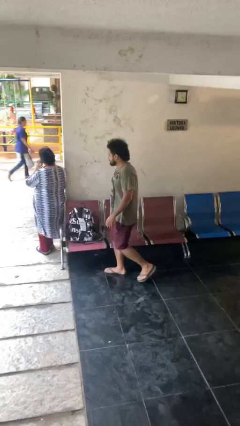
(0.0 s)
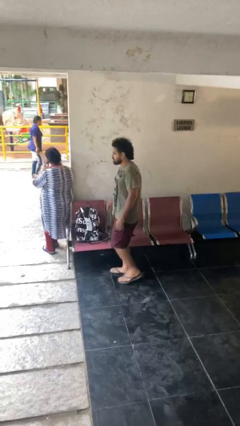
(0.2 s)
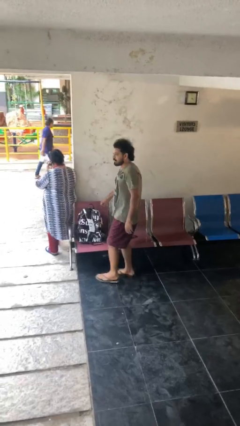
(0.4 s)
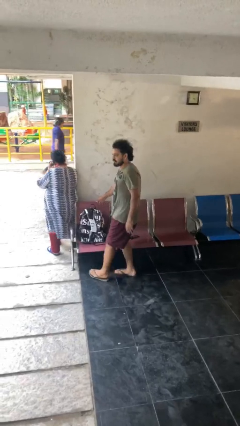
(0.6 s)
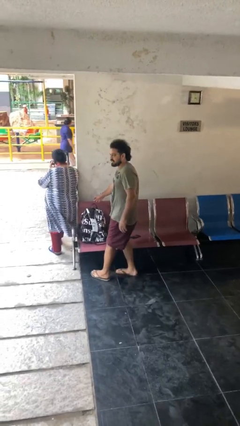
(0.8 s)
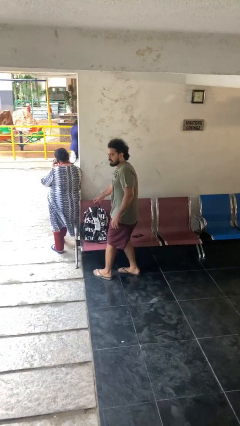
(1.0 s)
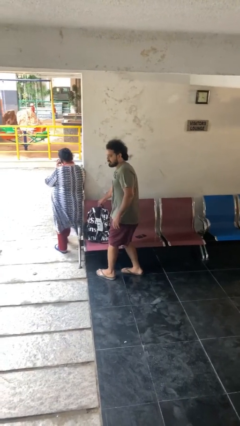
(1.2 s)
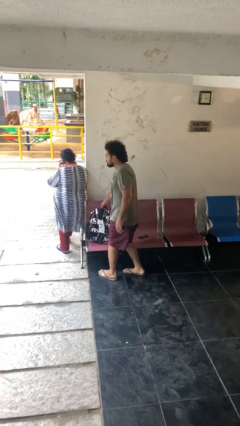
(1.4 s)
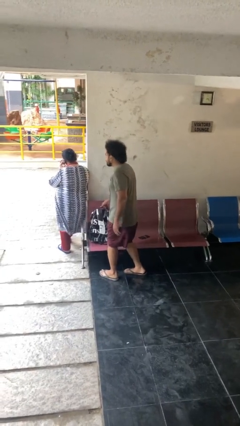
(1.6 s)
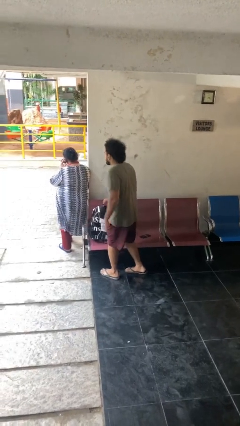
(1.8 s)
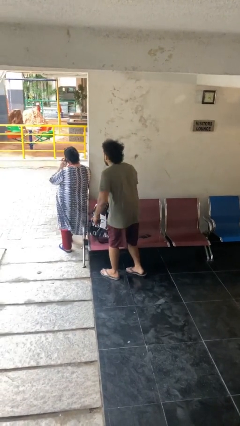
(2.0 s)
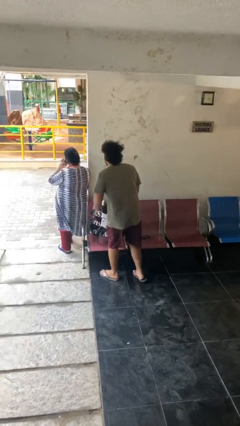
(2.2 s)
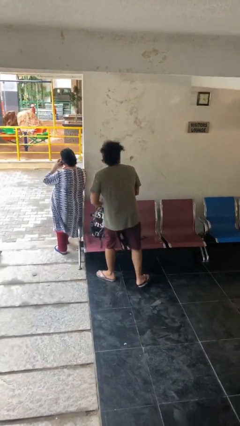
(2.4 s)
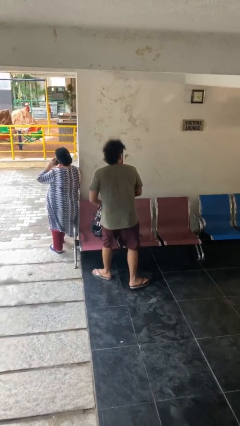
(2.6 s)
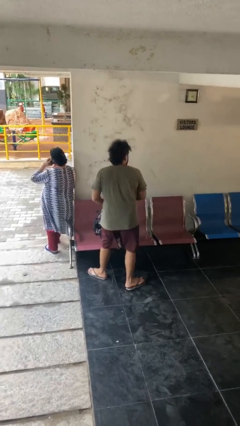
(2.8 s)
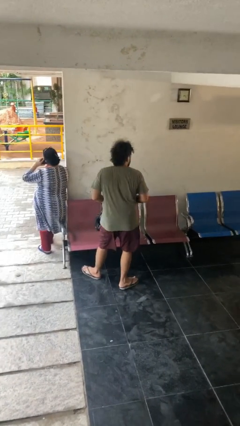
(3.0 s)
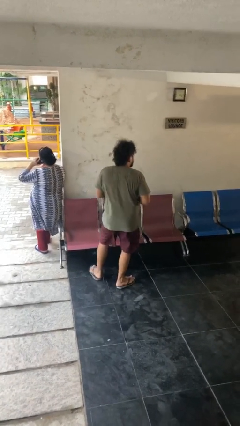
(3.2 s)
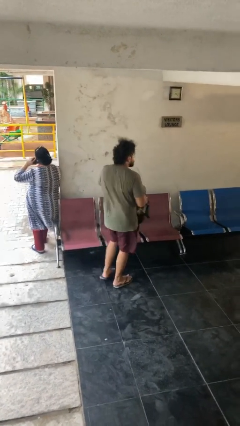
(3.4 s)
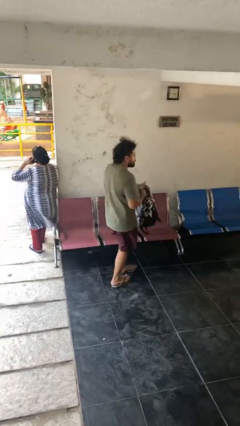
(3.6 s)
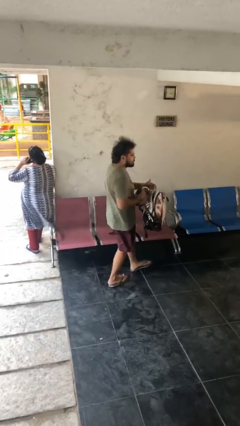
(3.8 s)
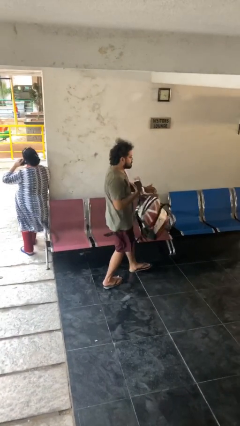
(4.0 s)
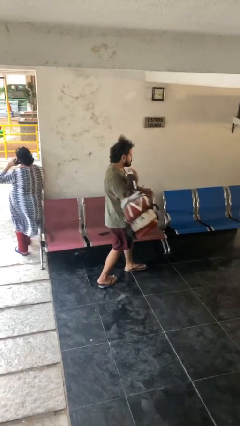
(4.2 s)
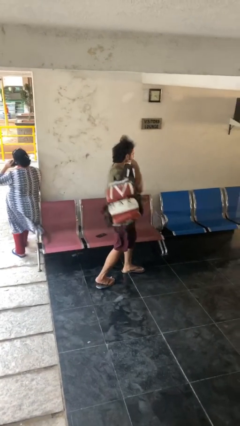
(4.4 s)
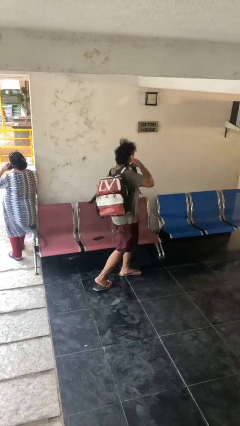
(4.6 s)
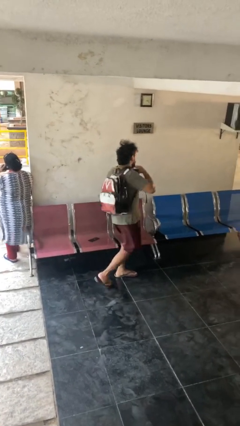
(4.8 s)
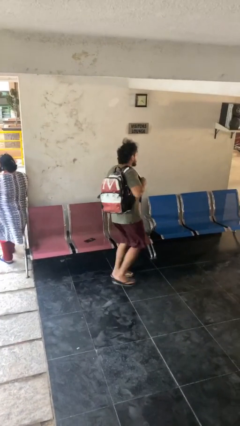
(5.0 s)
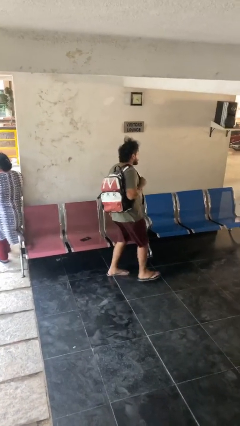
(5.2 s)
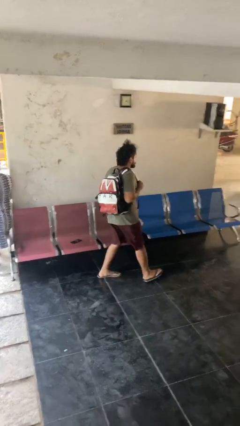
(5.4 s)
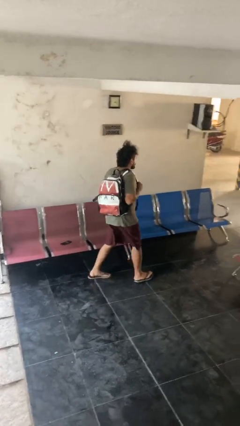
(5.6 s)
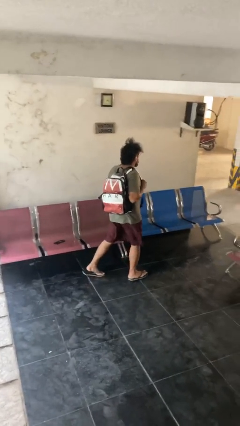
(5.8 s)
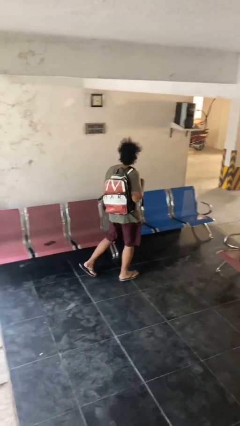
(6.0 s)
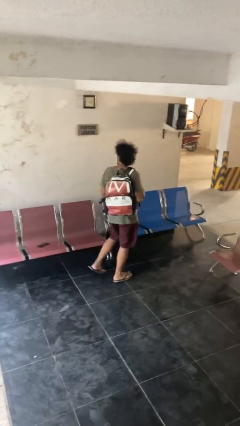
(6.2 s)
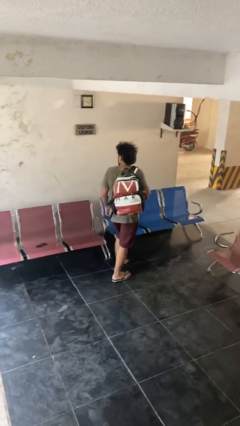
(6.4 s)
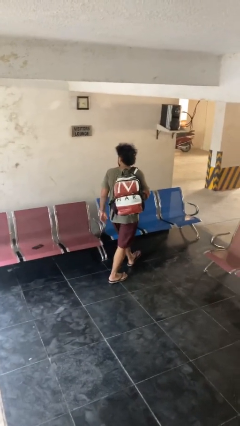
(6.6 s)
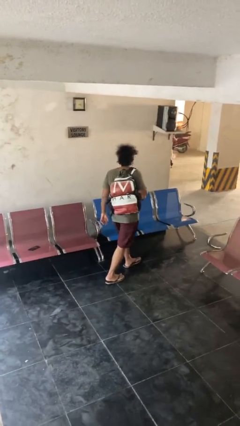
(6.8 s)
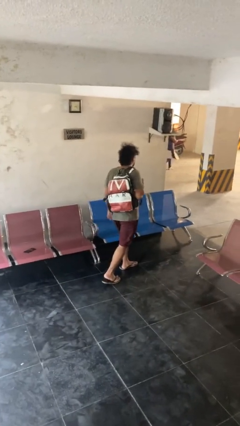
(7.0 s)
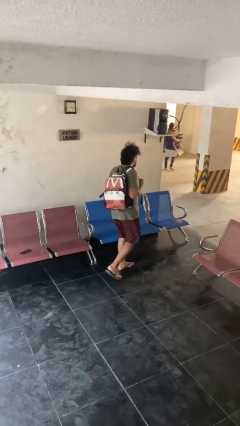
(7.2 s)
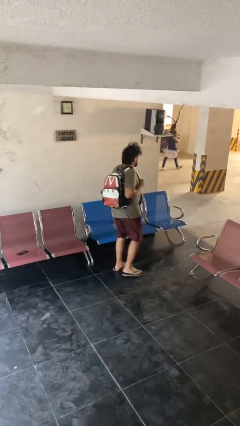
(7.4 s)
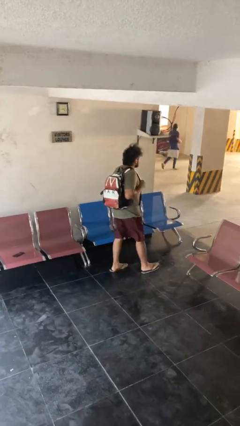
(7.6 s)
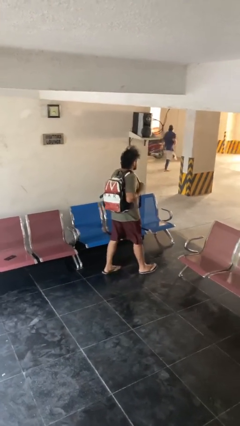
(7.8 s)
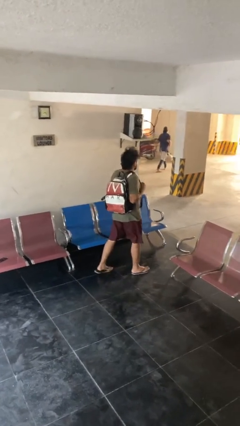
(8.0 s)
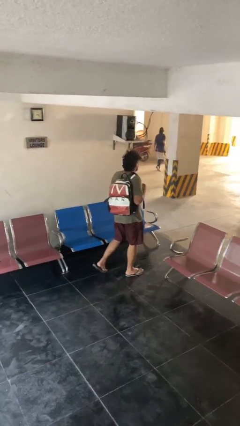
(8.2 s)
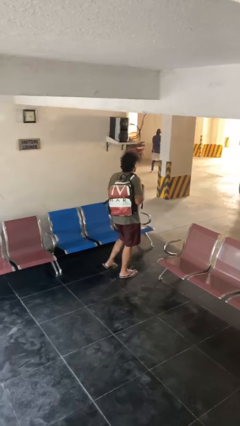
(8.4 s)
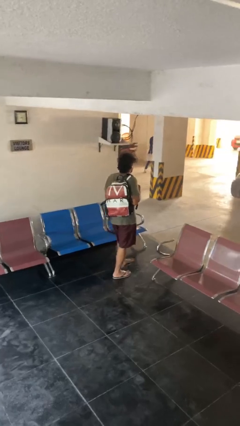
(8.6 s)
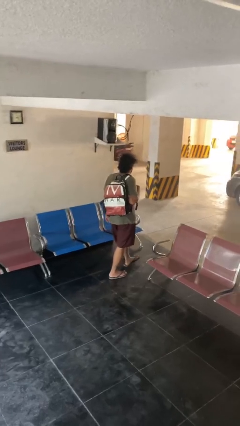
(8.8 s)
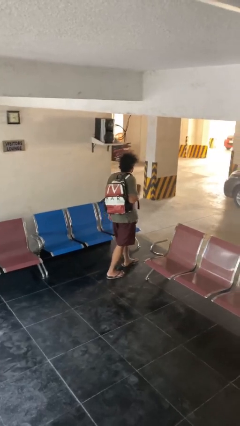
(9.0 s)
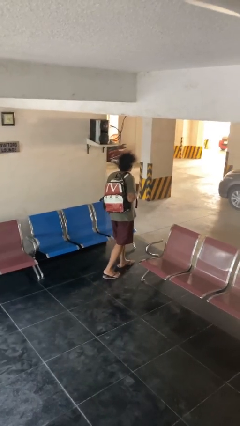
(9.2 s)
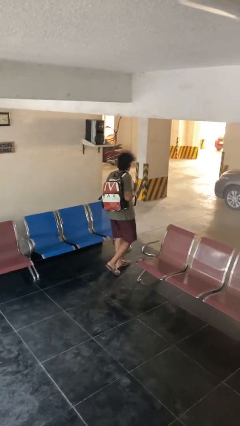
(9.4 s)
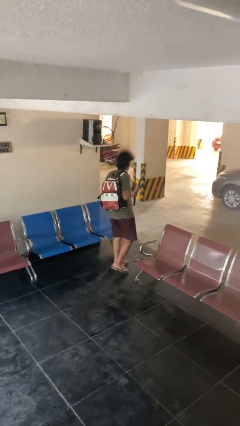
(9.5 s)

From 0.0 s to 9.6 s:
person steals object from person

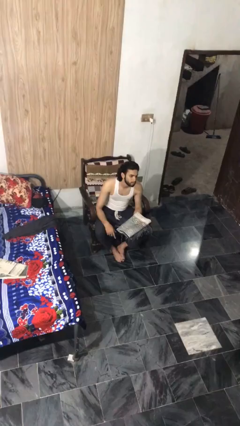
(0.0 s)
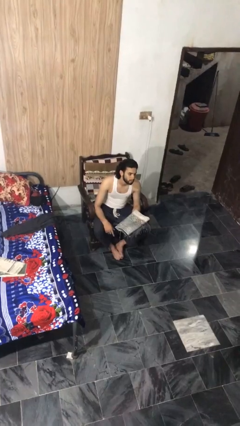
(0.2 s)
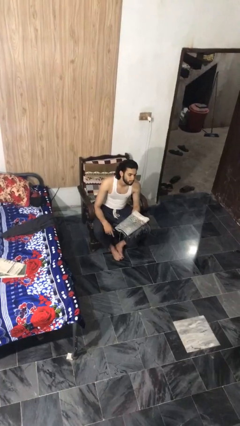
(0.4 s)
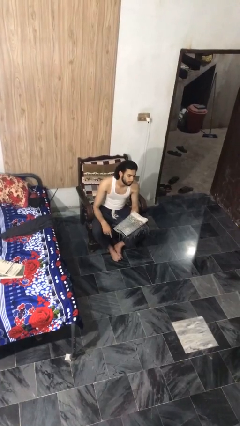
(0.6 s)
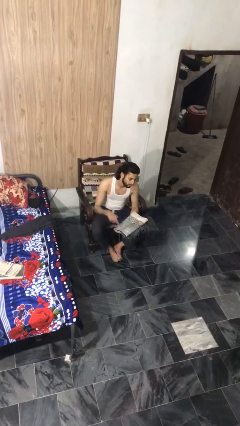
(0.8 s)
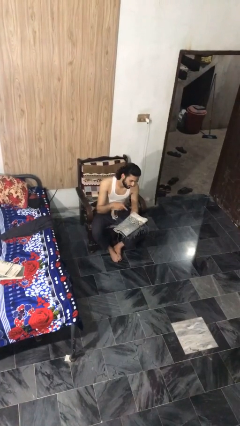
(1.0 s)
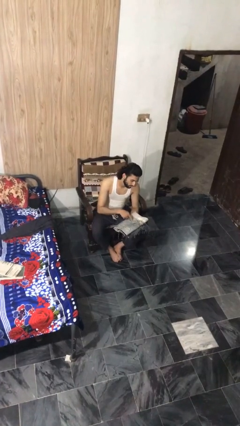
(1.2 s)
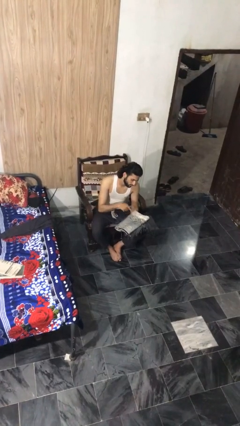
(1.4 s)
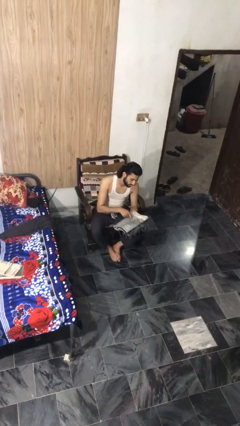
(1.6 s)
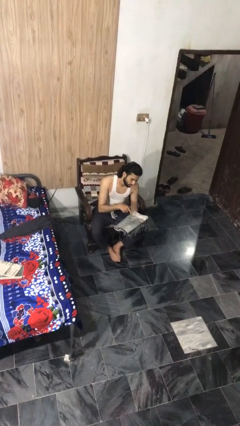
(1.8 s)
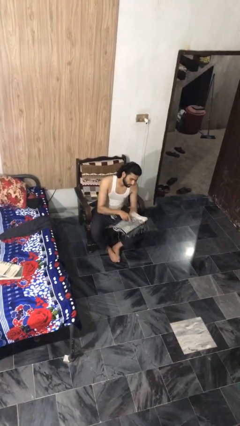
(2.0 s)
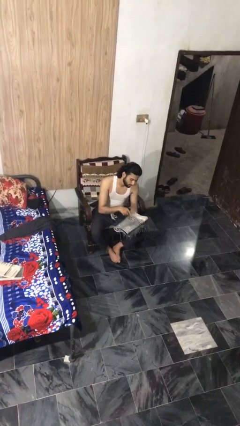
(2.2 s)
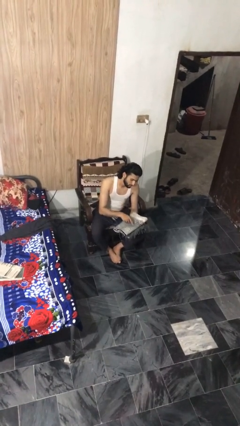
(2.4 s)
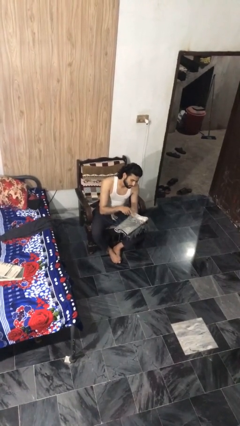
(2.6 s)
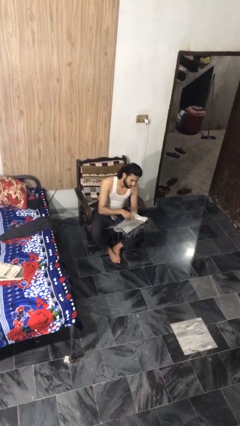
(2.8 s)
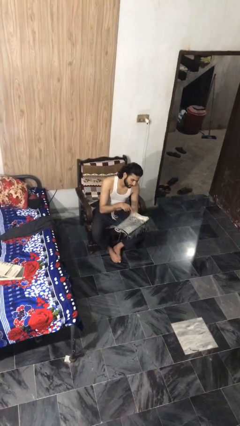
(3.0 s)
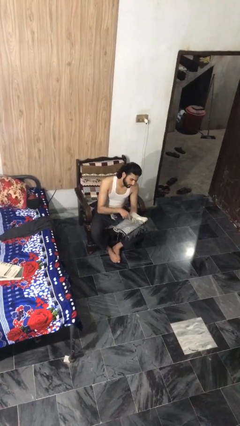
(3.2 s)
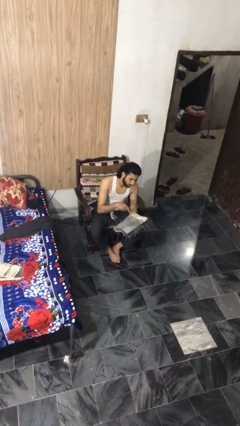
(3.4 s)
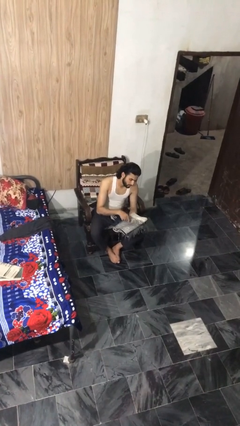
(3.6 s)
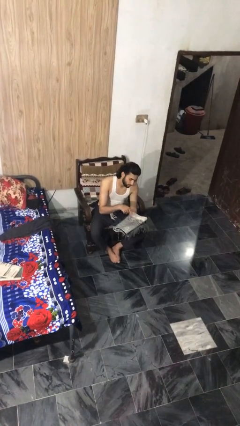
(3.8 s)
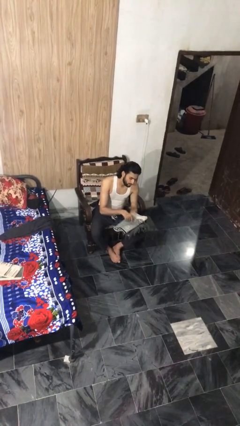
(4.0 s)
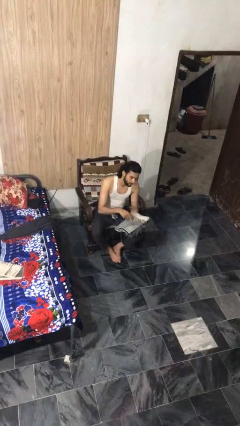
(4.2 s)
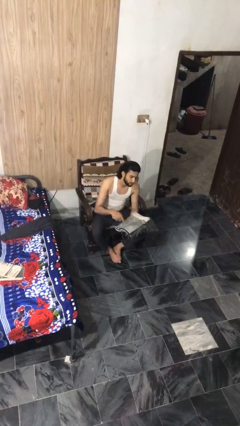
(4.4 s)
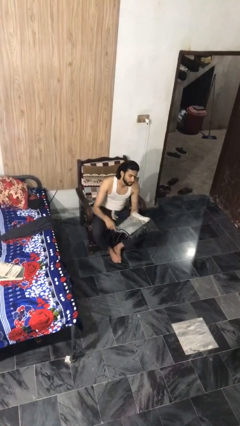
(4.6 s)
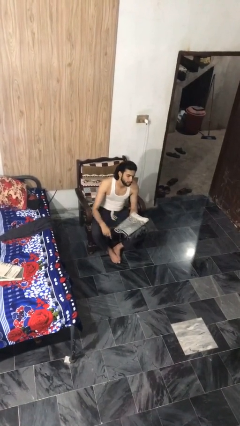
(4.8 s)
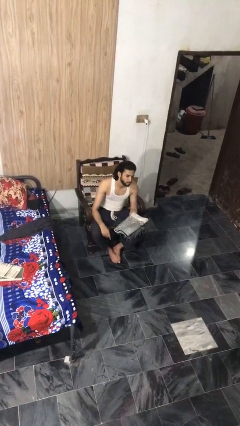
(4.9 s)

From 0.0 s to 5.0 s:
person taps object with finger

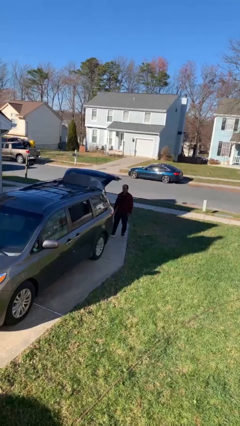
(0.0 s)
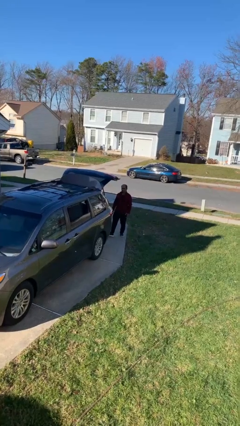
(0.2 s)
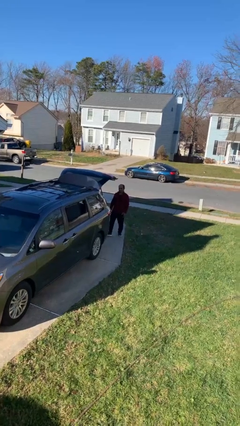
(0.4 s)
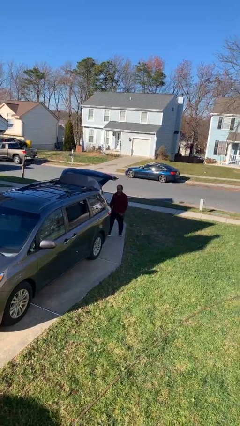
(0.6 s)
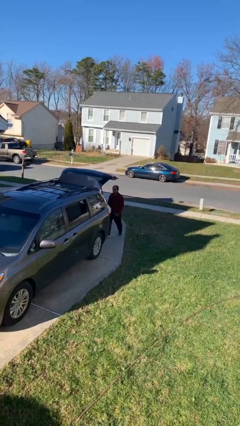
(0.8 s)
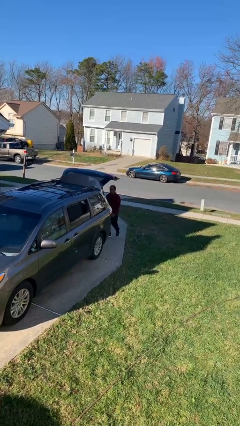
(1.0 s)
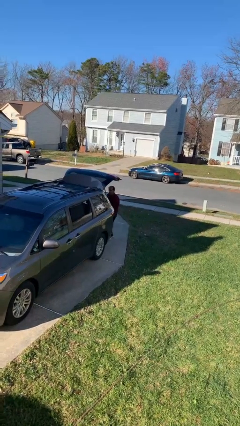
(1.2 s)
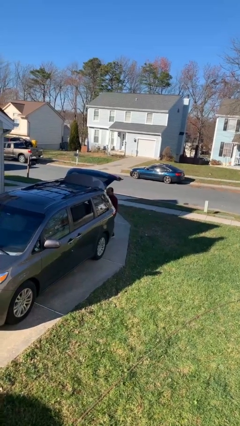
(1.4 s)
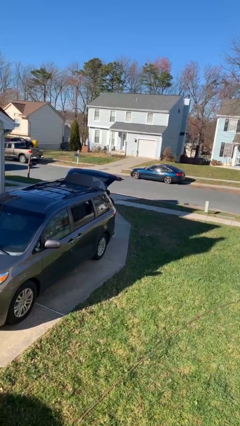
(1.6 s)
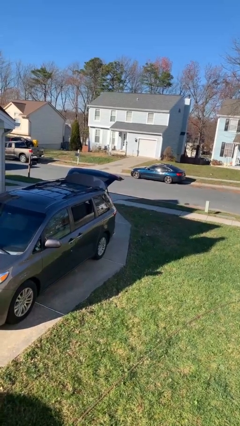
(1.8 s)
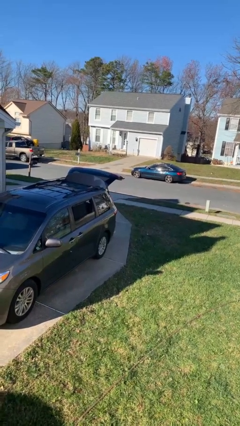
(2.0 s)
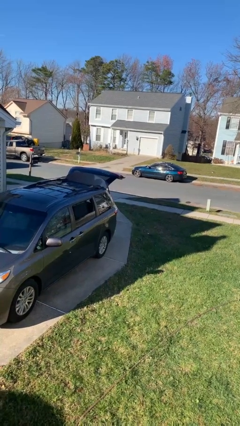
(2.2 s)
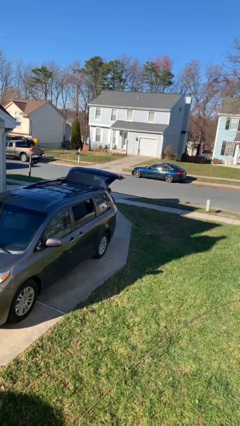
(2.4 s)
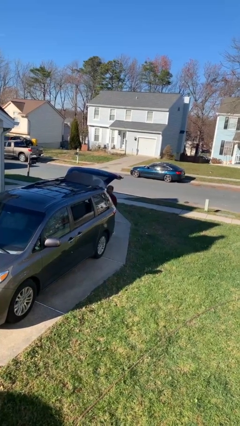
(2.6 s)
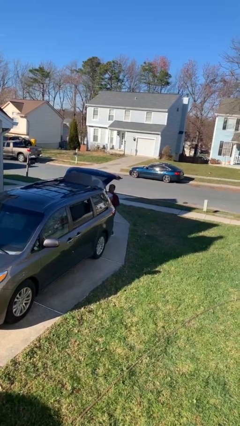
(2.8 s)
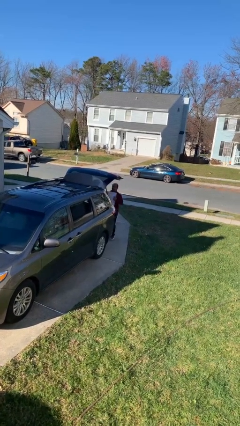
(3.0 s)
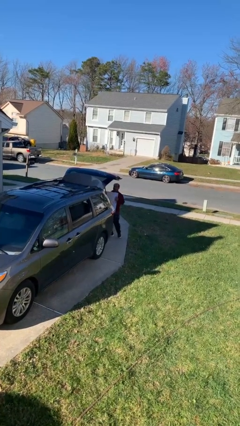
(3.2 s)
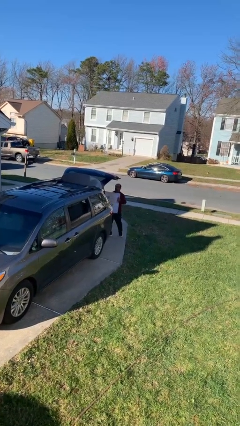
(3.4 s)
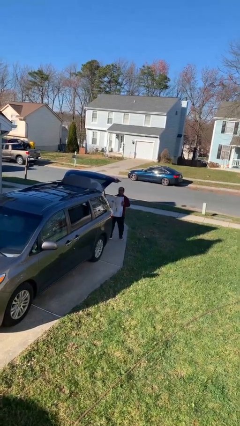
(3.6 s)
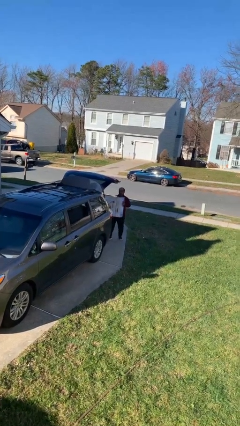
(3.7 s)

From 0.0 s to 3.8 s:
person unloads car
